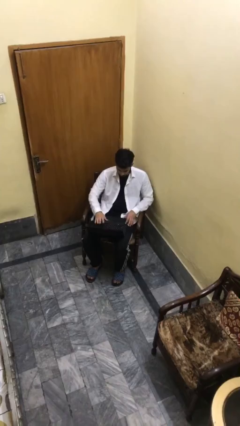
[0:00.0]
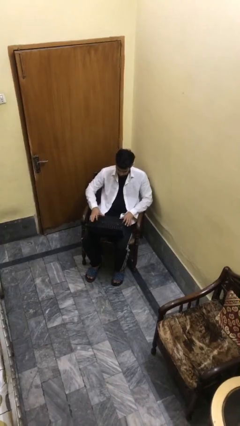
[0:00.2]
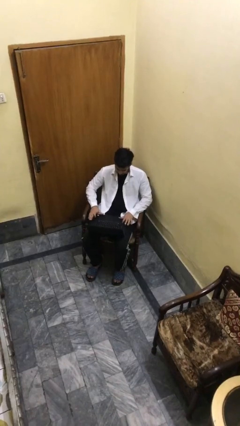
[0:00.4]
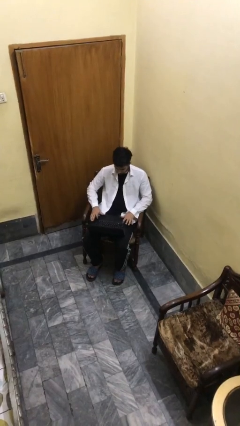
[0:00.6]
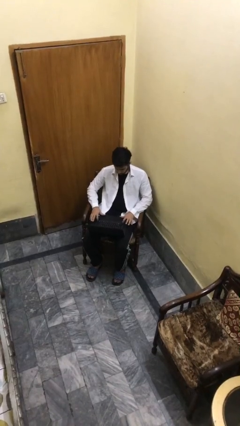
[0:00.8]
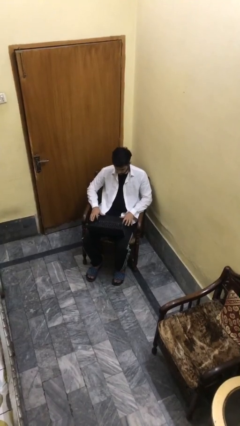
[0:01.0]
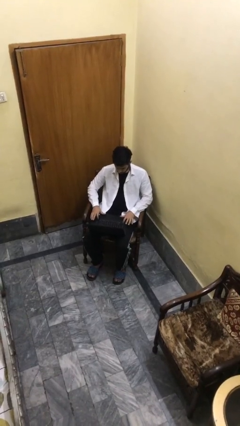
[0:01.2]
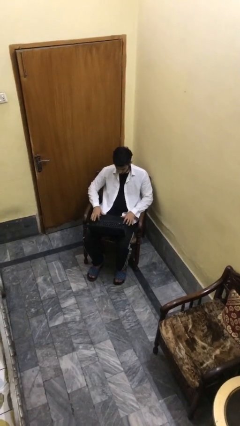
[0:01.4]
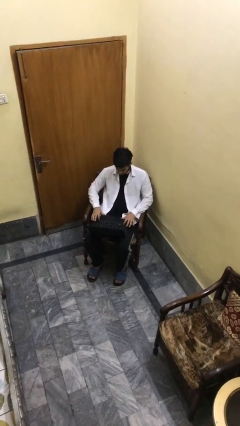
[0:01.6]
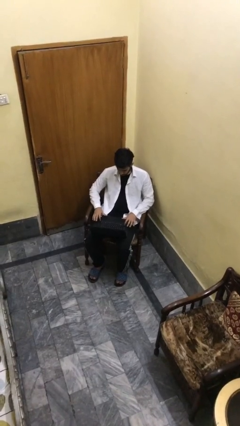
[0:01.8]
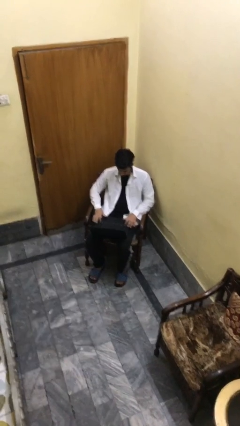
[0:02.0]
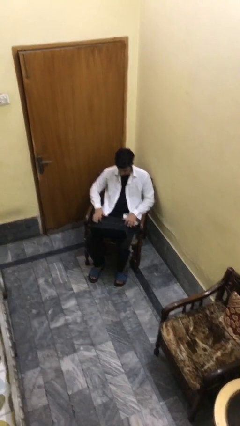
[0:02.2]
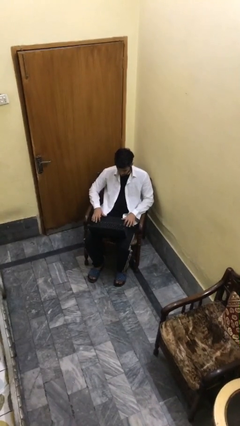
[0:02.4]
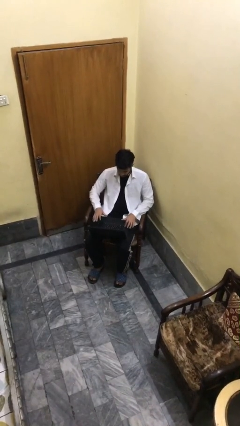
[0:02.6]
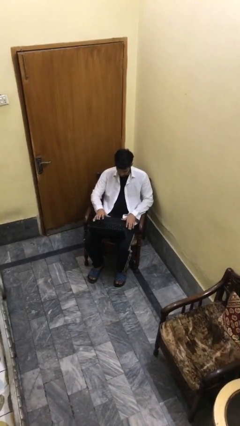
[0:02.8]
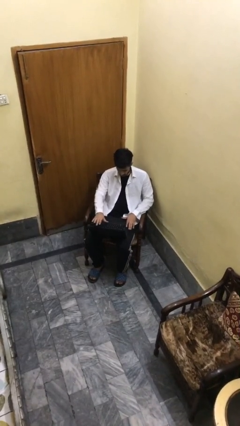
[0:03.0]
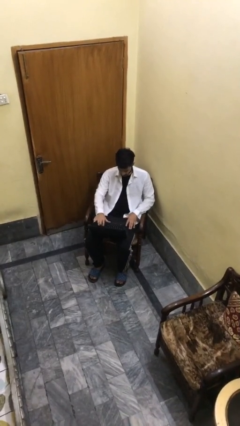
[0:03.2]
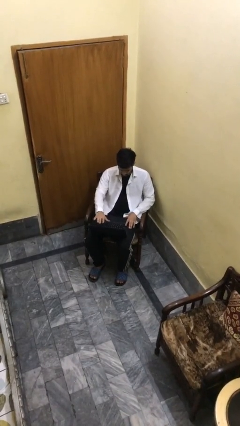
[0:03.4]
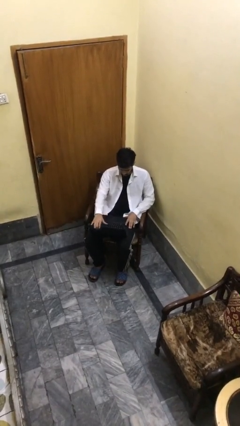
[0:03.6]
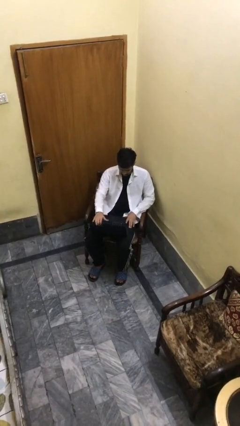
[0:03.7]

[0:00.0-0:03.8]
person interacts with laptop

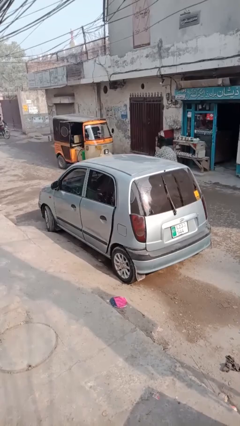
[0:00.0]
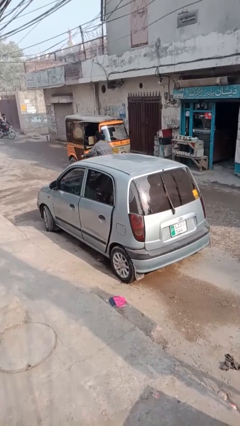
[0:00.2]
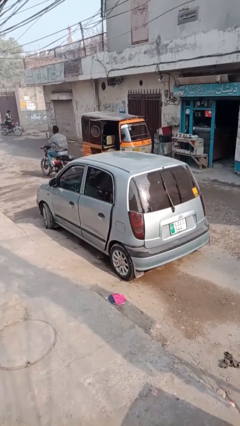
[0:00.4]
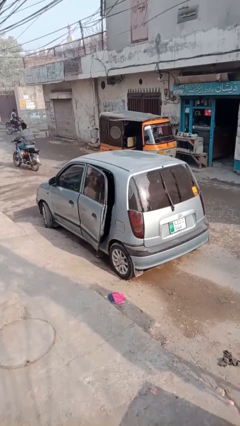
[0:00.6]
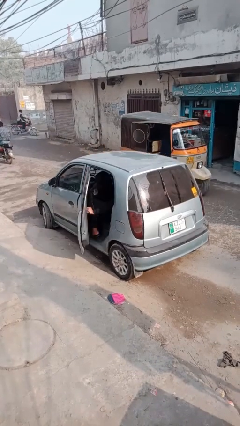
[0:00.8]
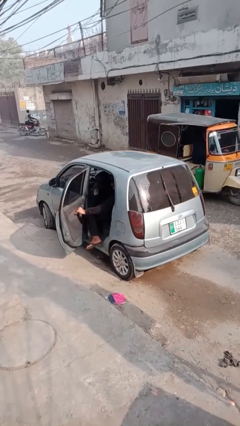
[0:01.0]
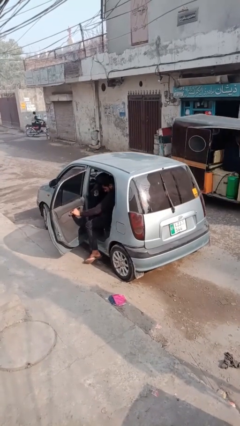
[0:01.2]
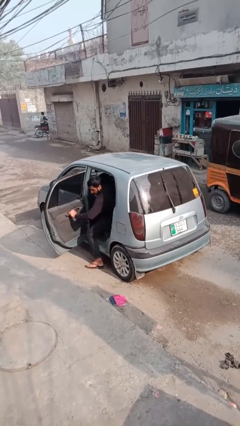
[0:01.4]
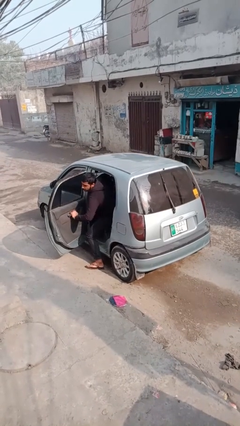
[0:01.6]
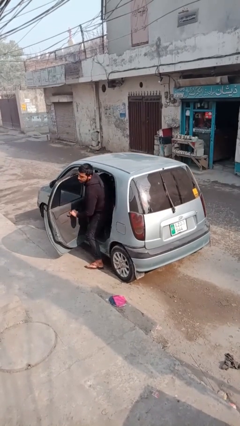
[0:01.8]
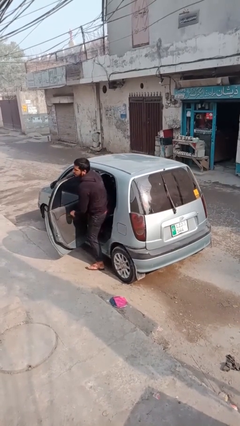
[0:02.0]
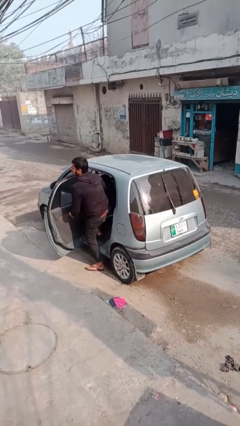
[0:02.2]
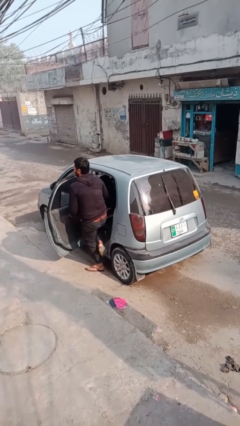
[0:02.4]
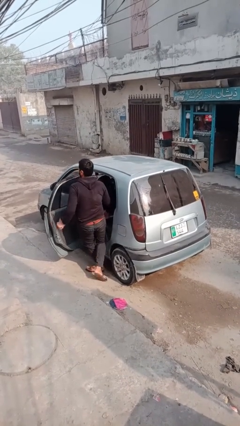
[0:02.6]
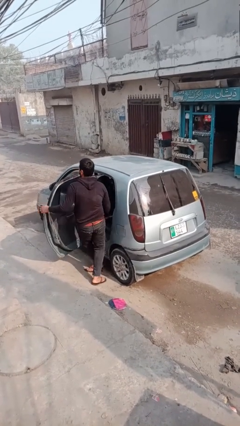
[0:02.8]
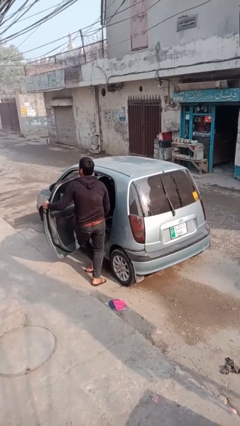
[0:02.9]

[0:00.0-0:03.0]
car drops off person

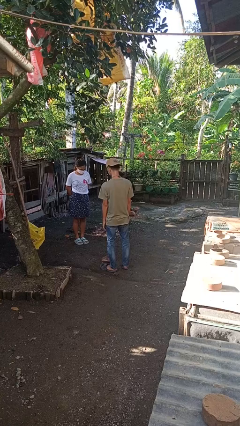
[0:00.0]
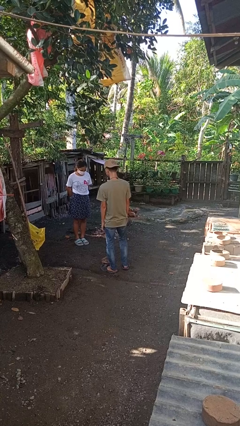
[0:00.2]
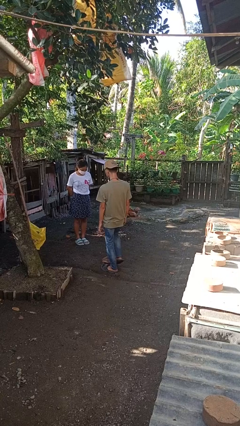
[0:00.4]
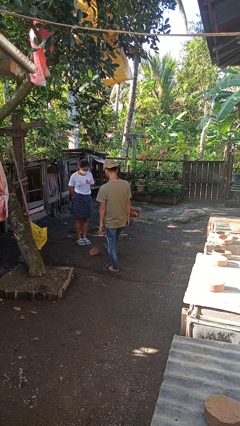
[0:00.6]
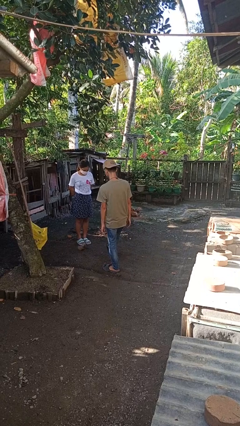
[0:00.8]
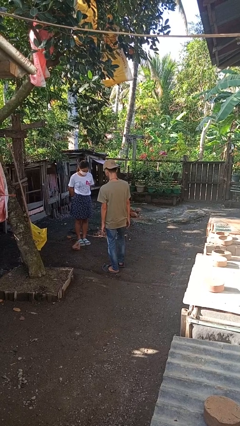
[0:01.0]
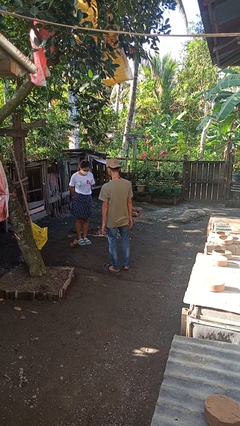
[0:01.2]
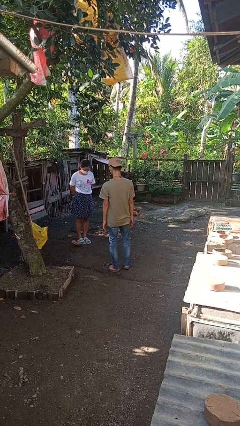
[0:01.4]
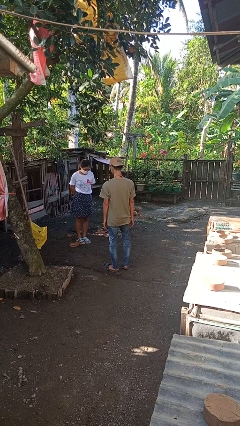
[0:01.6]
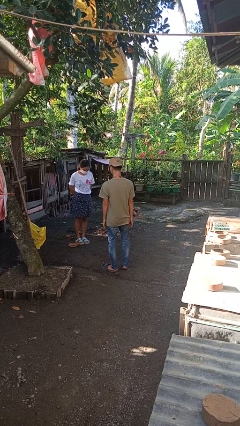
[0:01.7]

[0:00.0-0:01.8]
person kicks object to person

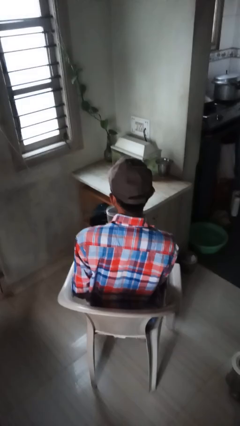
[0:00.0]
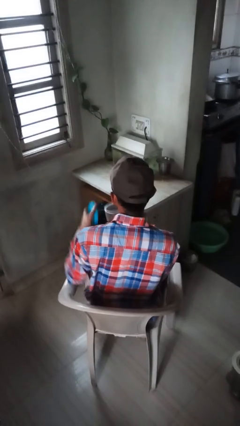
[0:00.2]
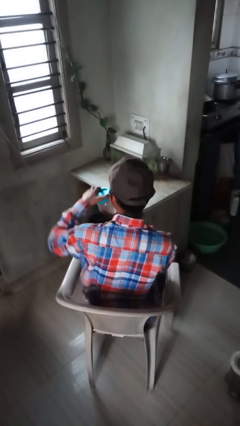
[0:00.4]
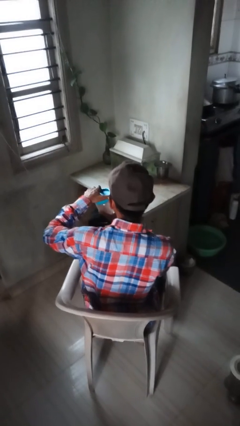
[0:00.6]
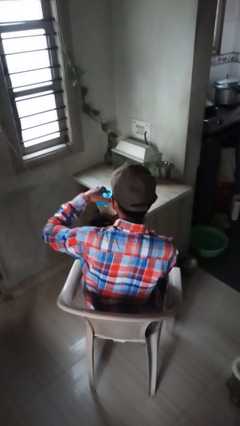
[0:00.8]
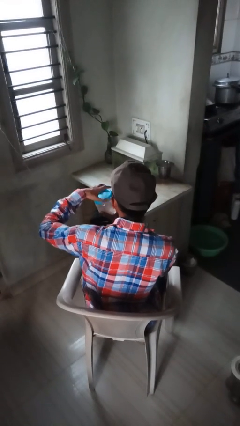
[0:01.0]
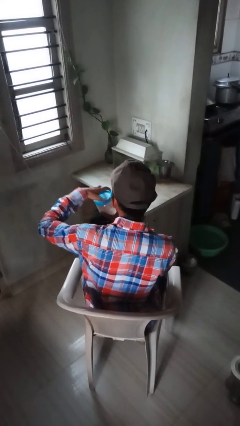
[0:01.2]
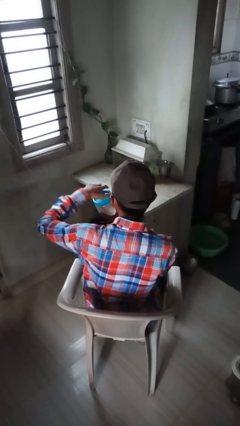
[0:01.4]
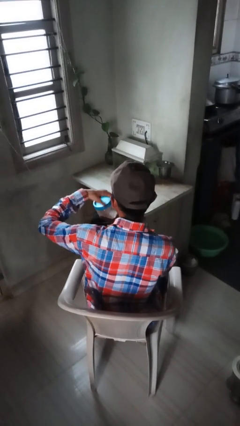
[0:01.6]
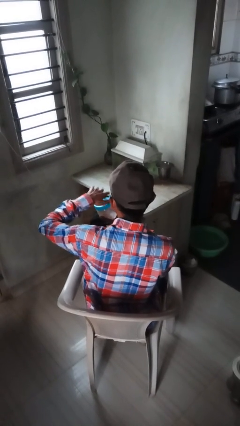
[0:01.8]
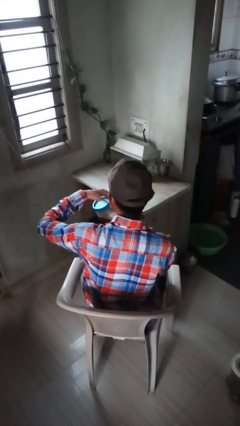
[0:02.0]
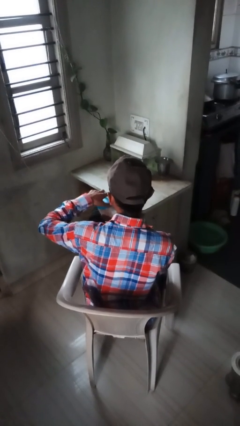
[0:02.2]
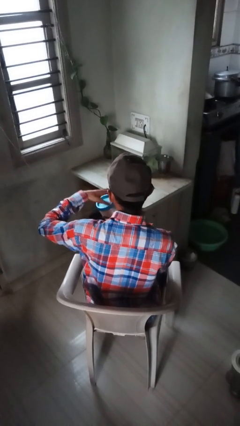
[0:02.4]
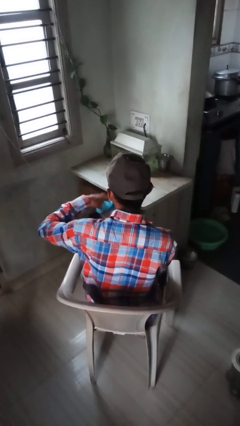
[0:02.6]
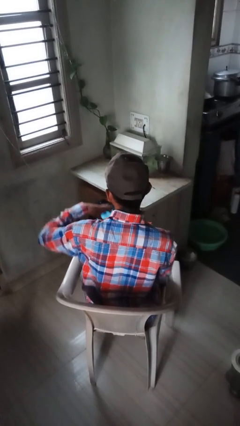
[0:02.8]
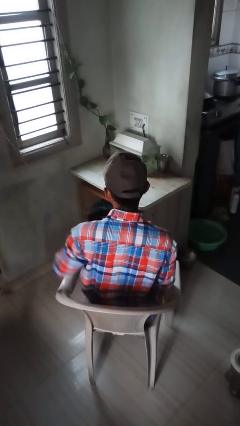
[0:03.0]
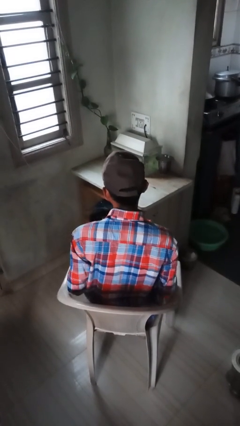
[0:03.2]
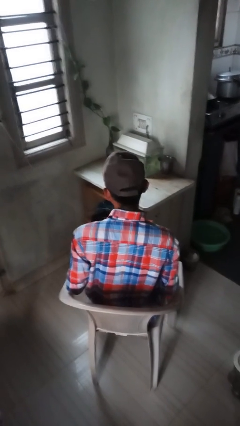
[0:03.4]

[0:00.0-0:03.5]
person closes jar

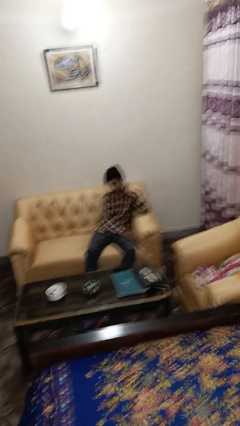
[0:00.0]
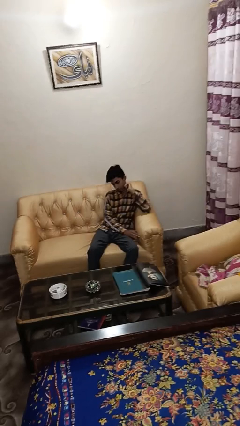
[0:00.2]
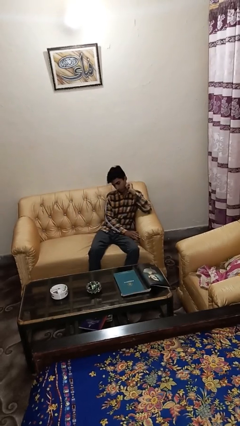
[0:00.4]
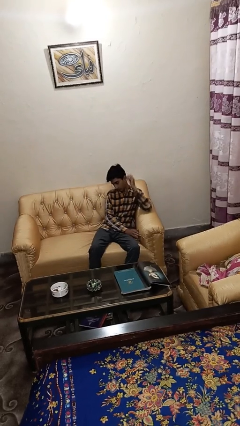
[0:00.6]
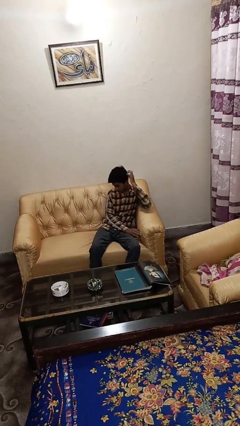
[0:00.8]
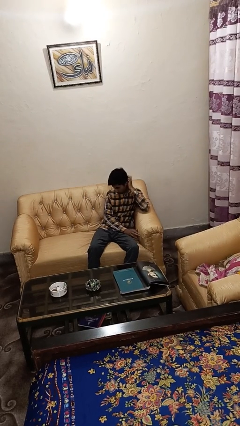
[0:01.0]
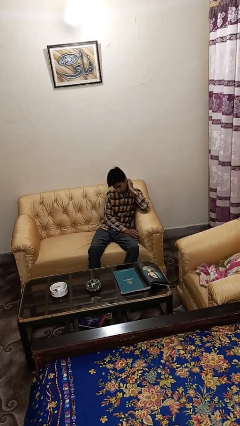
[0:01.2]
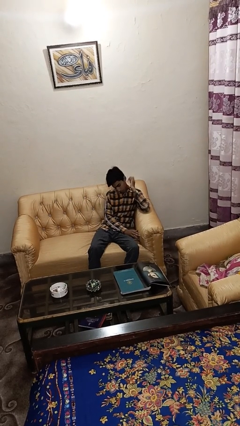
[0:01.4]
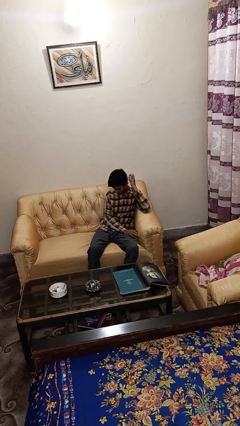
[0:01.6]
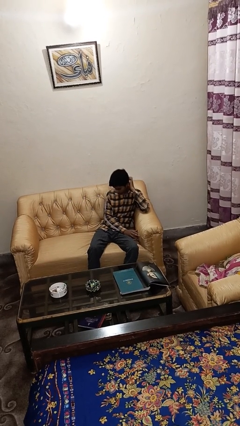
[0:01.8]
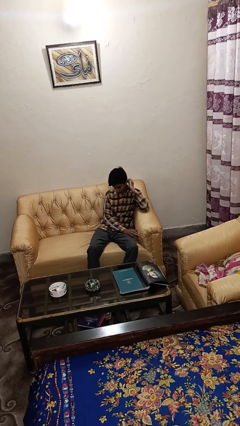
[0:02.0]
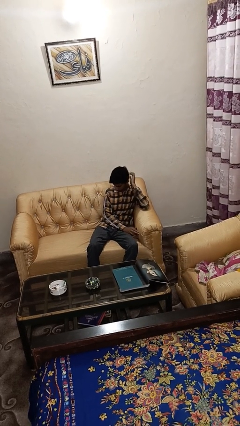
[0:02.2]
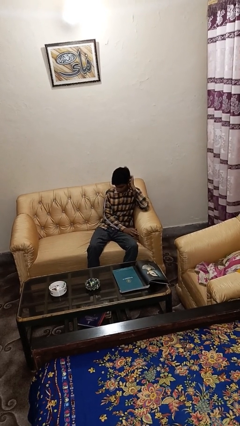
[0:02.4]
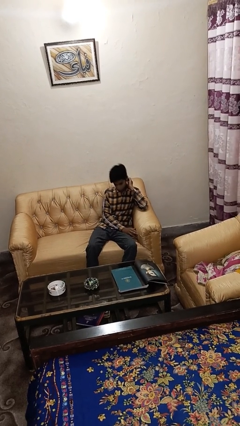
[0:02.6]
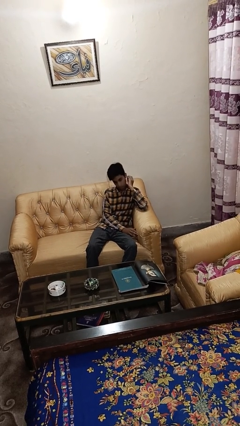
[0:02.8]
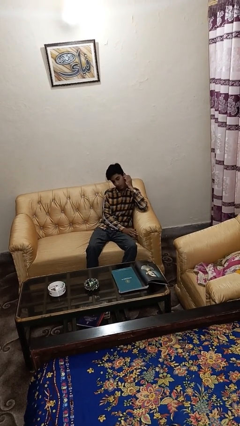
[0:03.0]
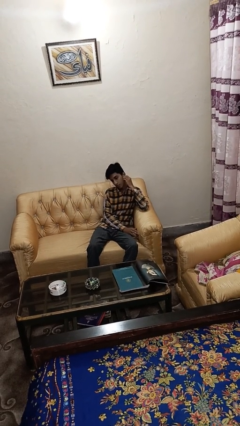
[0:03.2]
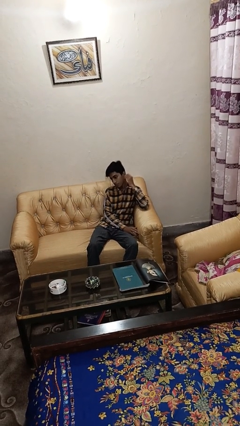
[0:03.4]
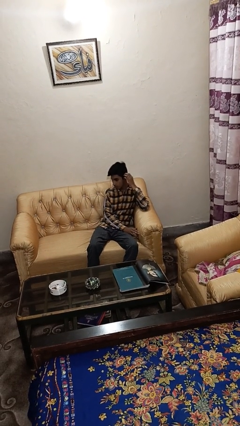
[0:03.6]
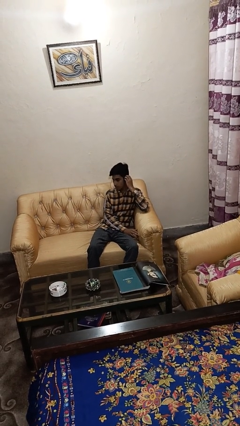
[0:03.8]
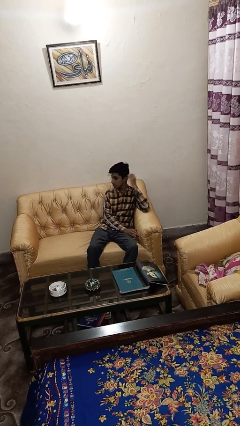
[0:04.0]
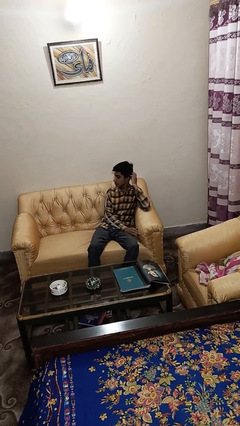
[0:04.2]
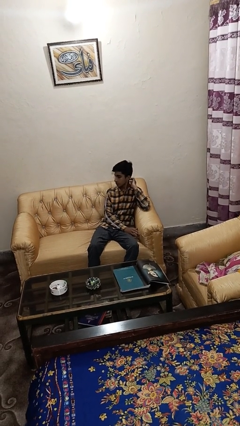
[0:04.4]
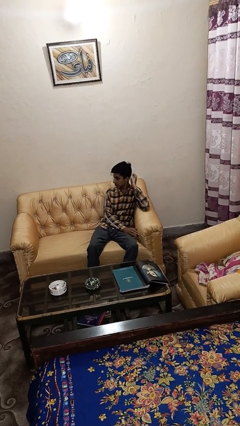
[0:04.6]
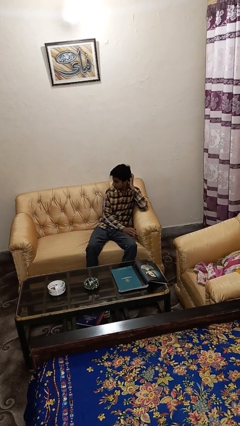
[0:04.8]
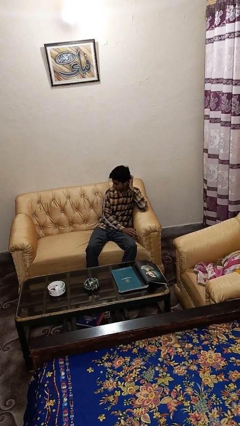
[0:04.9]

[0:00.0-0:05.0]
person strokes hair

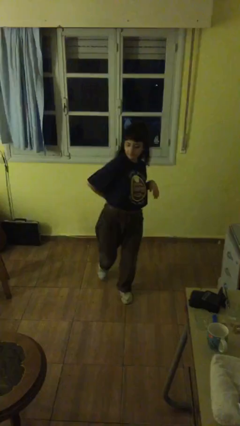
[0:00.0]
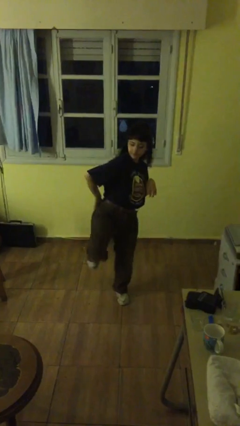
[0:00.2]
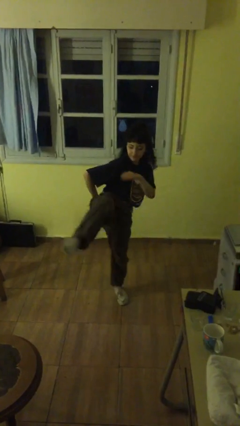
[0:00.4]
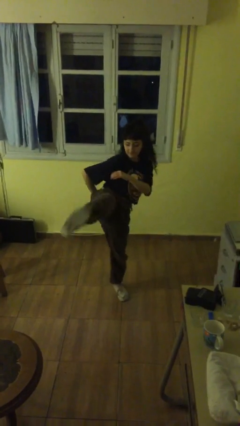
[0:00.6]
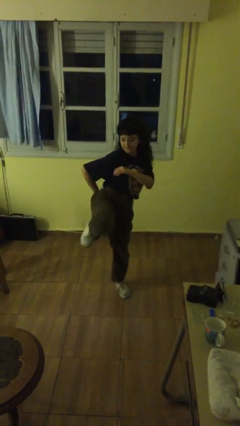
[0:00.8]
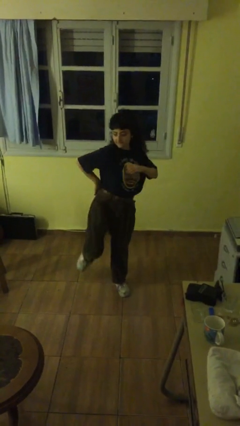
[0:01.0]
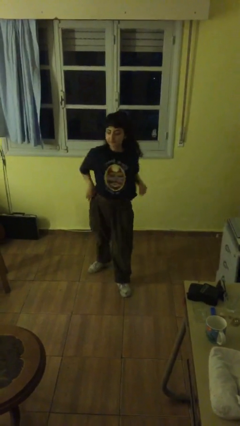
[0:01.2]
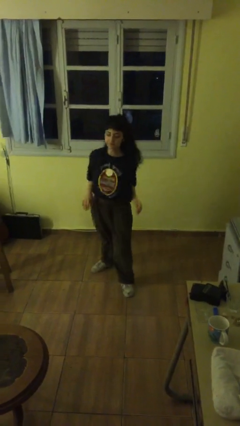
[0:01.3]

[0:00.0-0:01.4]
person karate kicks
